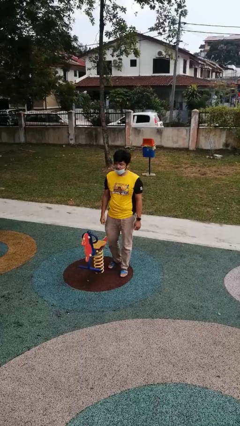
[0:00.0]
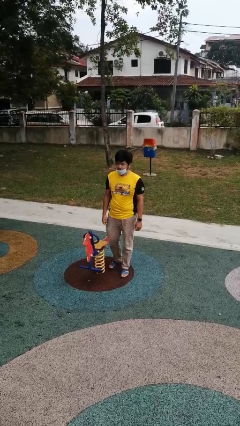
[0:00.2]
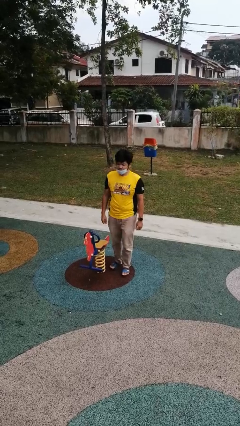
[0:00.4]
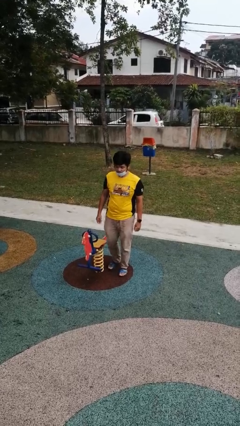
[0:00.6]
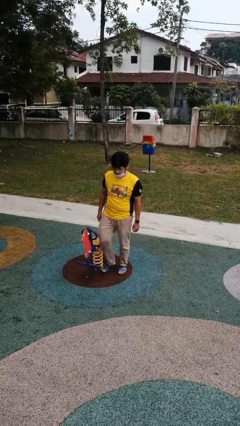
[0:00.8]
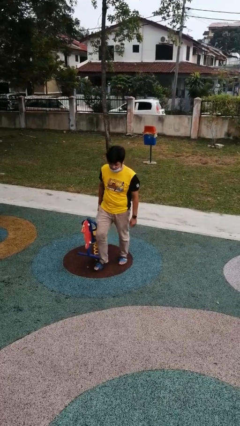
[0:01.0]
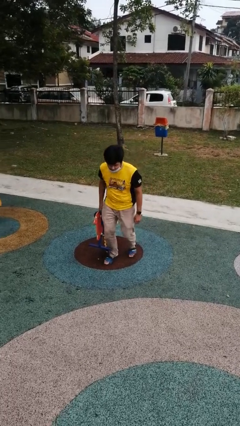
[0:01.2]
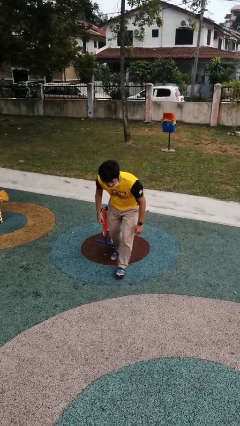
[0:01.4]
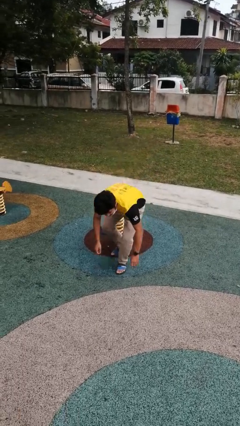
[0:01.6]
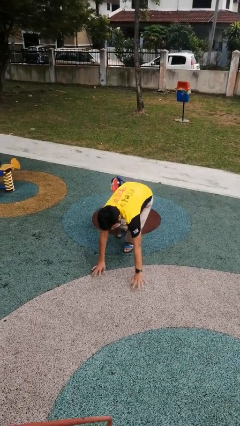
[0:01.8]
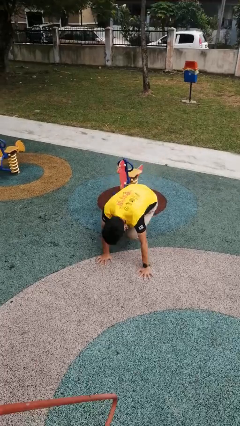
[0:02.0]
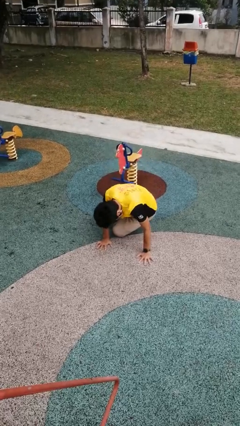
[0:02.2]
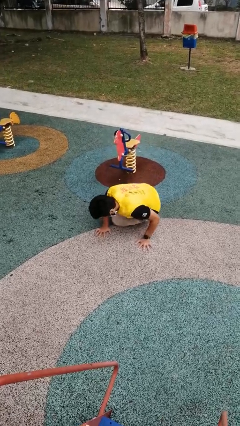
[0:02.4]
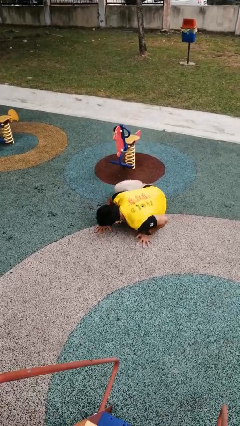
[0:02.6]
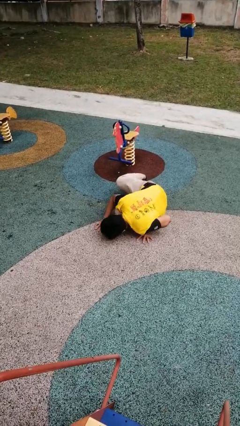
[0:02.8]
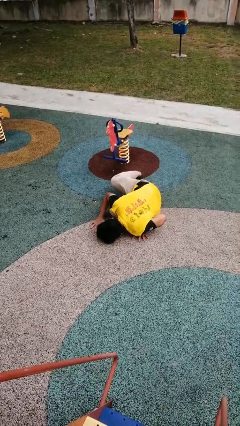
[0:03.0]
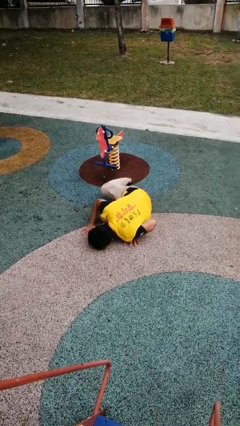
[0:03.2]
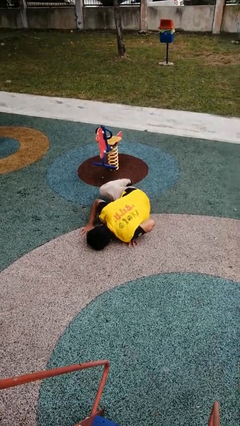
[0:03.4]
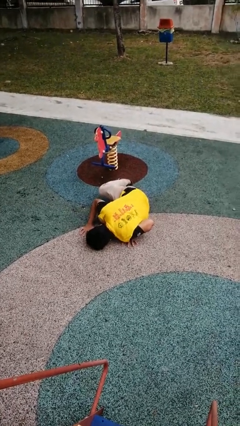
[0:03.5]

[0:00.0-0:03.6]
person trips on object on floor

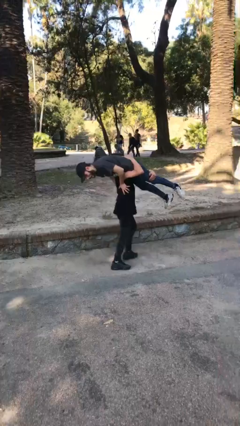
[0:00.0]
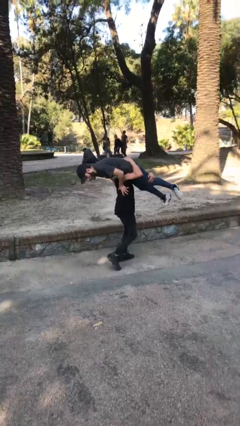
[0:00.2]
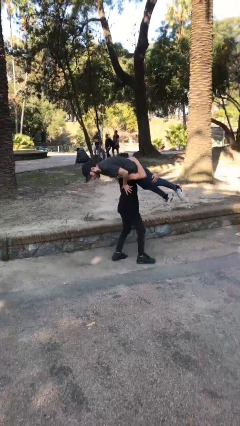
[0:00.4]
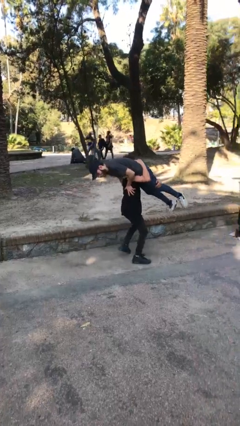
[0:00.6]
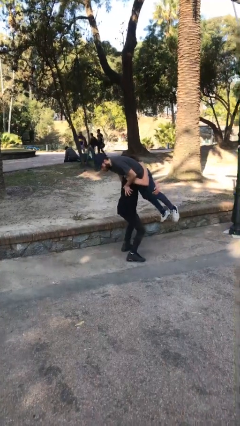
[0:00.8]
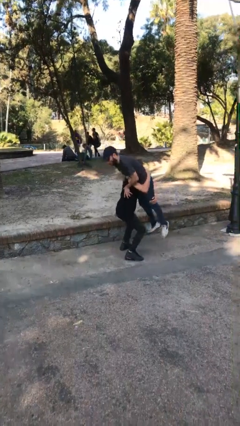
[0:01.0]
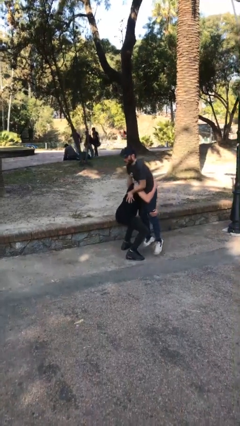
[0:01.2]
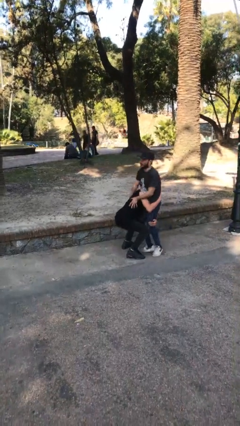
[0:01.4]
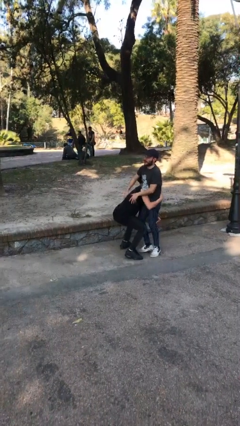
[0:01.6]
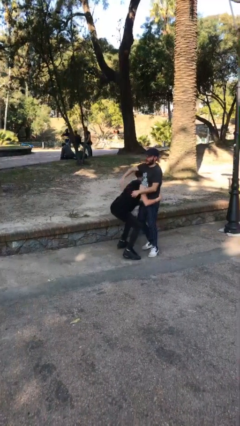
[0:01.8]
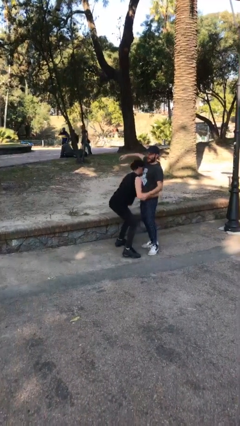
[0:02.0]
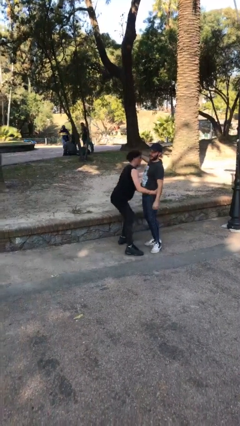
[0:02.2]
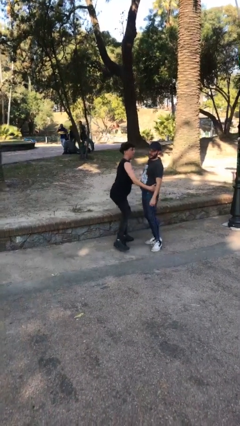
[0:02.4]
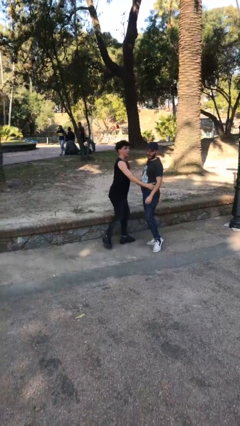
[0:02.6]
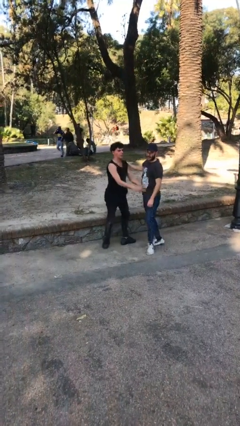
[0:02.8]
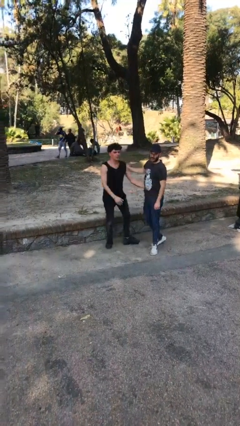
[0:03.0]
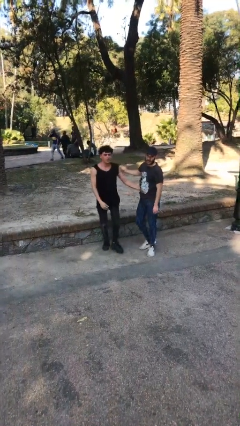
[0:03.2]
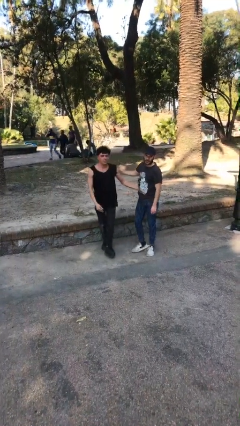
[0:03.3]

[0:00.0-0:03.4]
person puts down person

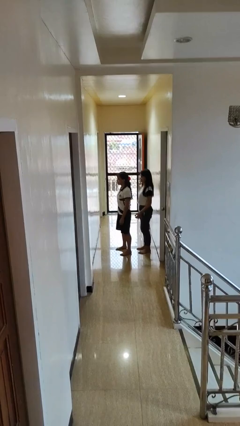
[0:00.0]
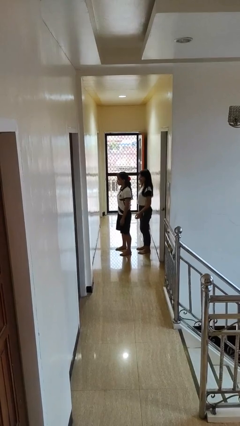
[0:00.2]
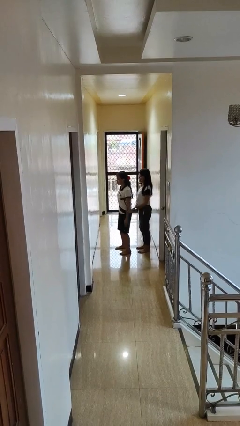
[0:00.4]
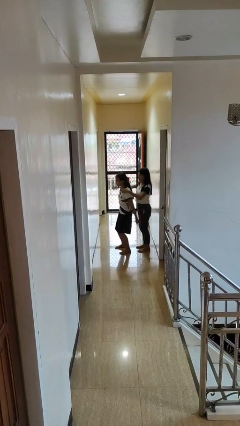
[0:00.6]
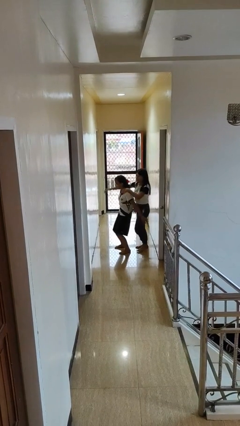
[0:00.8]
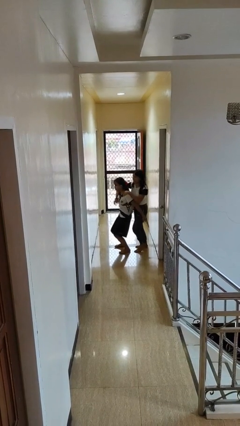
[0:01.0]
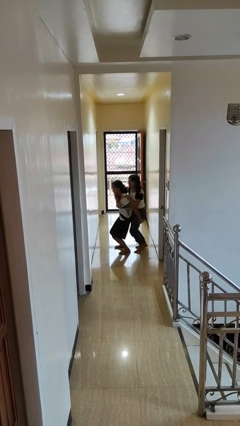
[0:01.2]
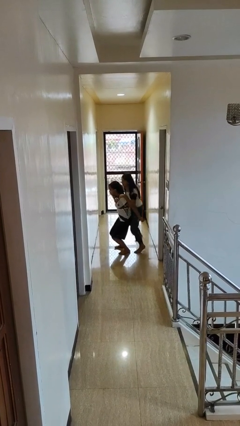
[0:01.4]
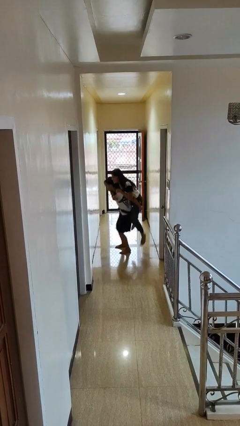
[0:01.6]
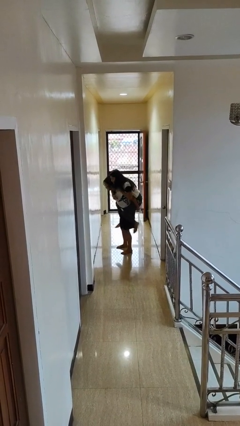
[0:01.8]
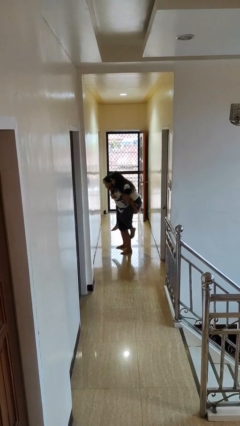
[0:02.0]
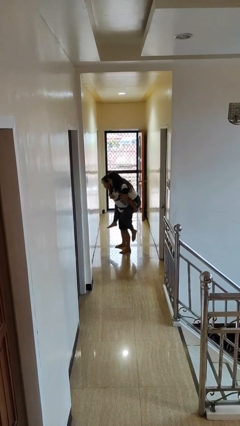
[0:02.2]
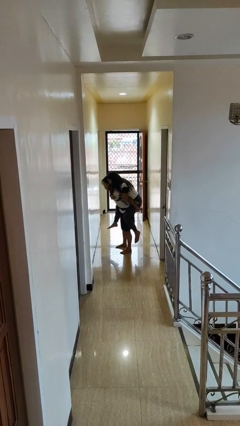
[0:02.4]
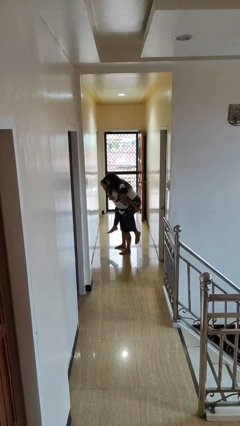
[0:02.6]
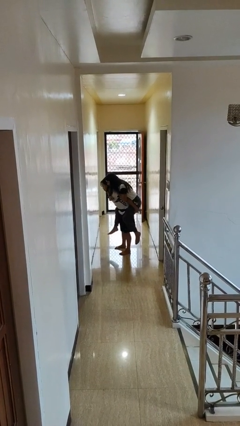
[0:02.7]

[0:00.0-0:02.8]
person carries person over shoulder

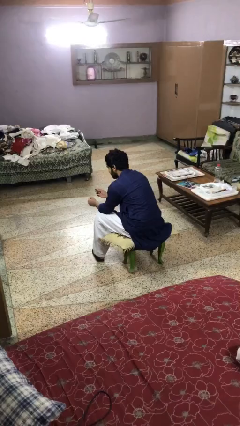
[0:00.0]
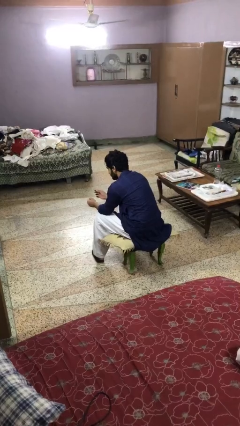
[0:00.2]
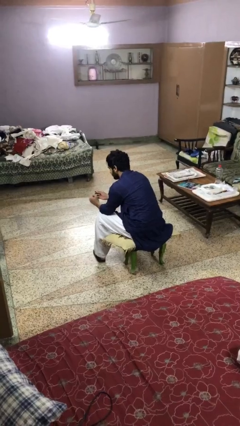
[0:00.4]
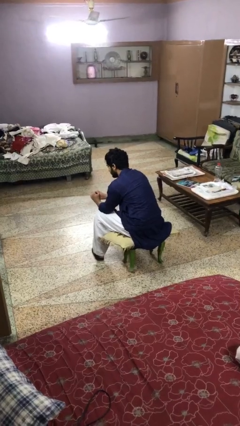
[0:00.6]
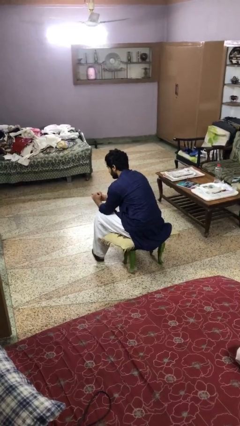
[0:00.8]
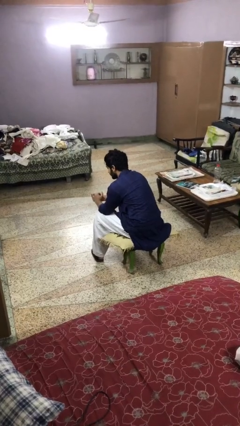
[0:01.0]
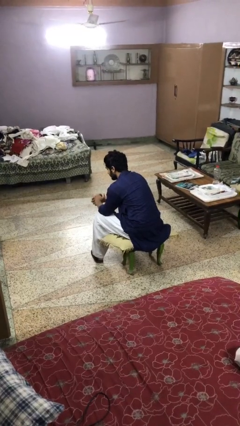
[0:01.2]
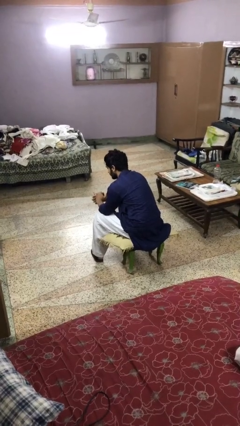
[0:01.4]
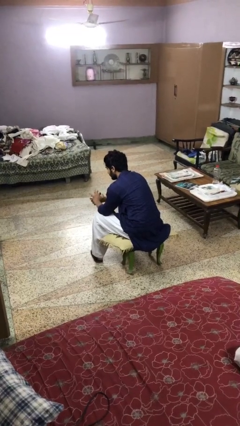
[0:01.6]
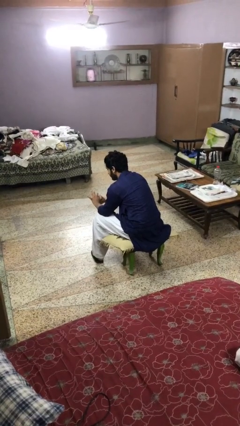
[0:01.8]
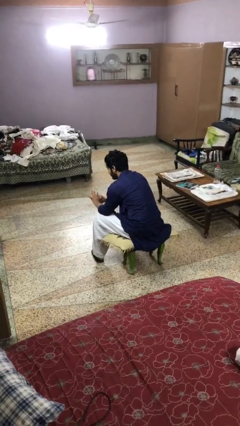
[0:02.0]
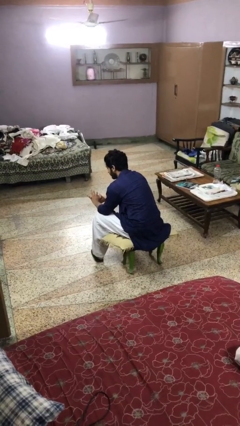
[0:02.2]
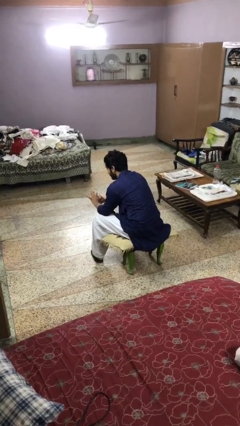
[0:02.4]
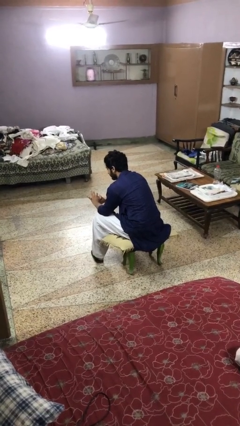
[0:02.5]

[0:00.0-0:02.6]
person puts on ring

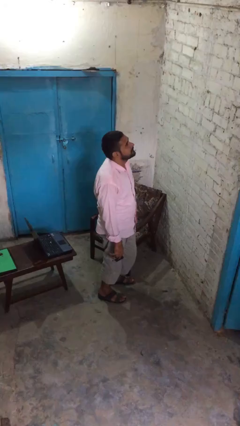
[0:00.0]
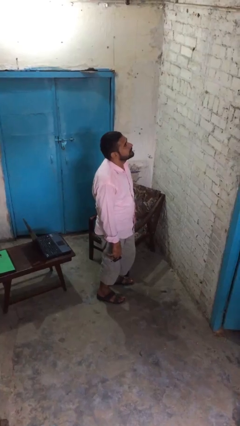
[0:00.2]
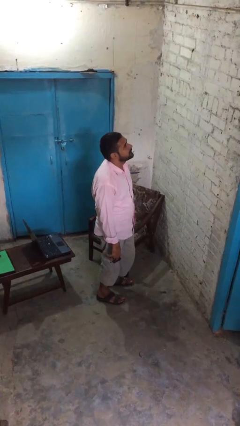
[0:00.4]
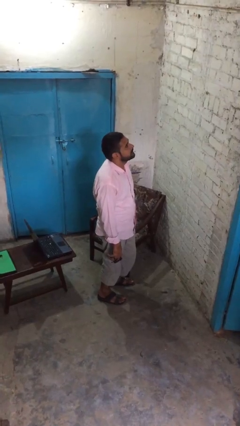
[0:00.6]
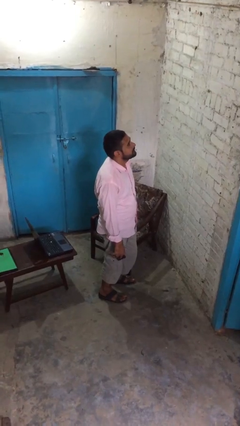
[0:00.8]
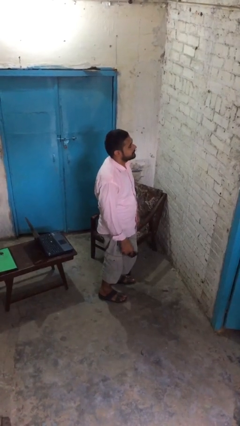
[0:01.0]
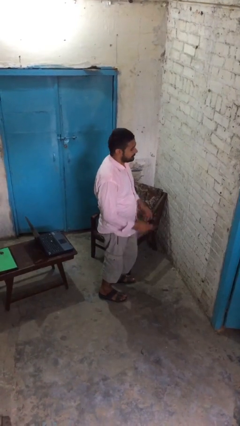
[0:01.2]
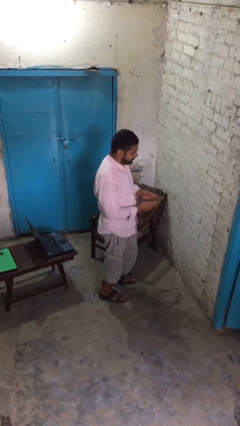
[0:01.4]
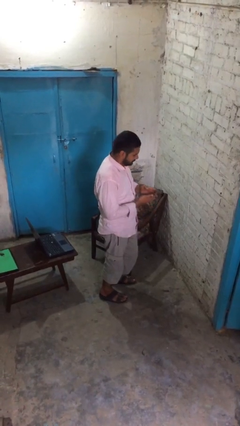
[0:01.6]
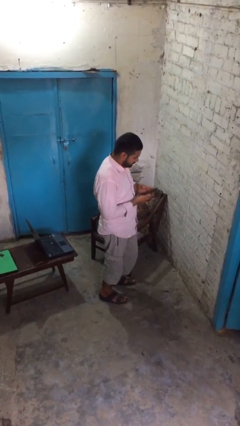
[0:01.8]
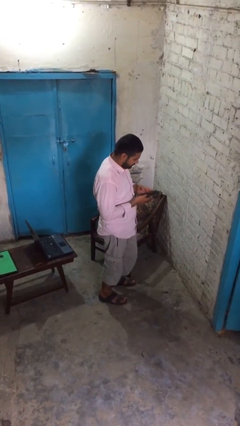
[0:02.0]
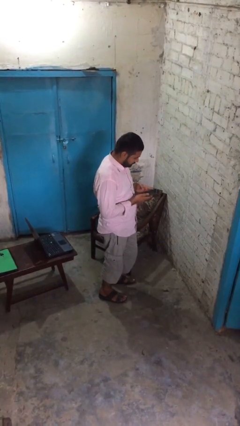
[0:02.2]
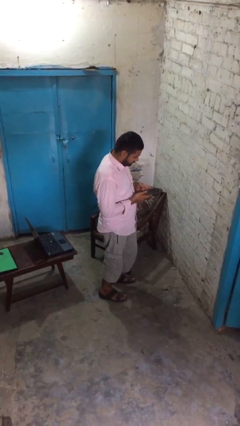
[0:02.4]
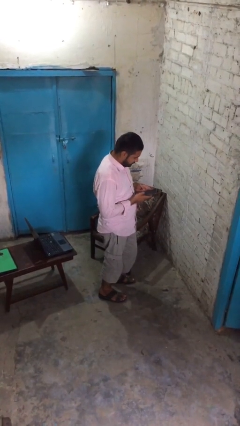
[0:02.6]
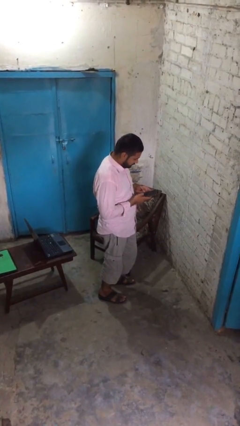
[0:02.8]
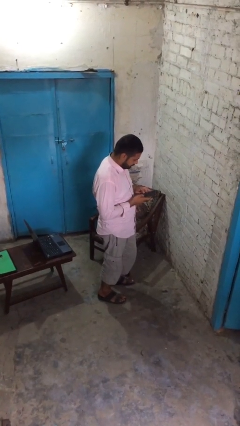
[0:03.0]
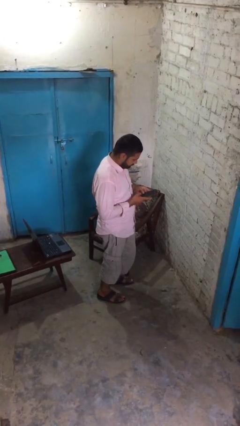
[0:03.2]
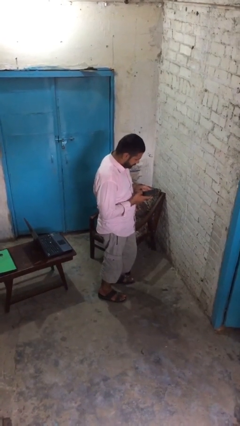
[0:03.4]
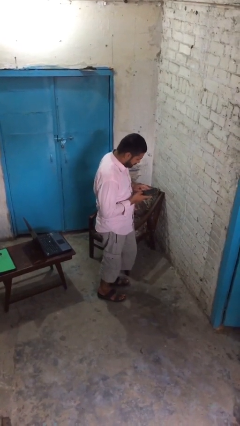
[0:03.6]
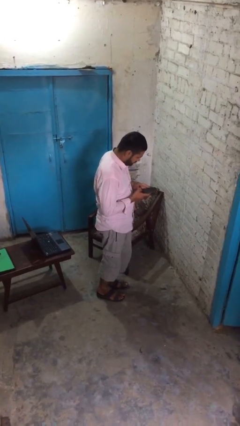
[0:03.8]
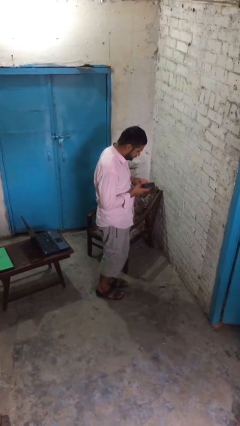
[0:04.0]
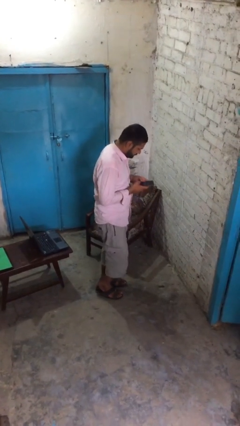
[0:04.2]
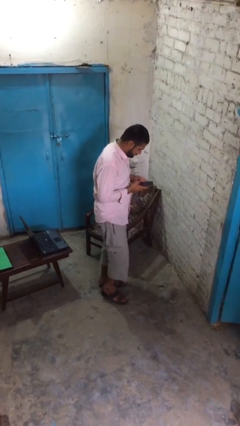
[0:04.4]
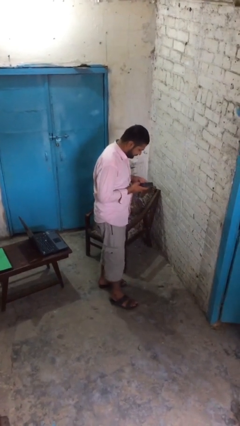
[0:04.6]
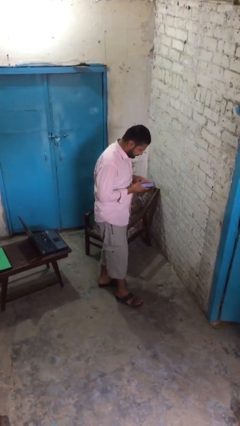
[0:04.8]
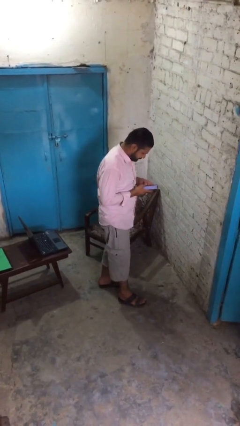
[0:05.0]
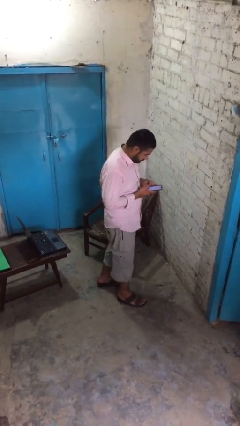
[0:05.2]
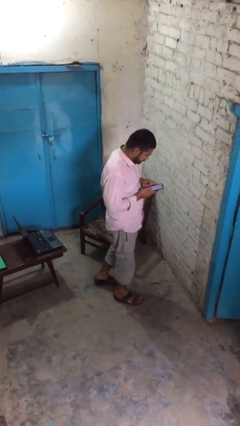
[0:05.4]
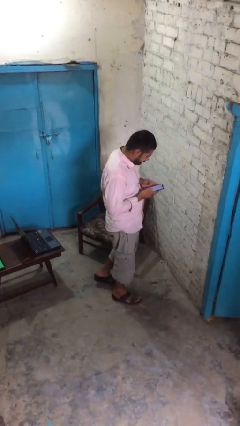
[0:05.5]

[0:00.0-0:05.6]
person texts on phone
